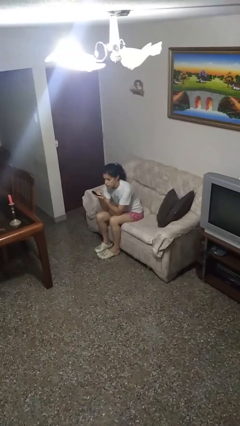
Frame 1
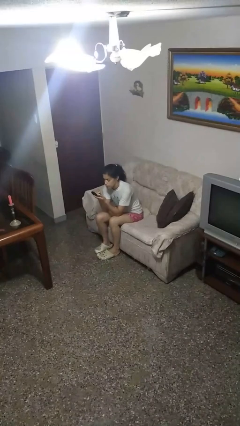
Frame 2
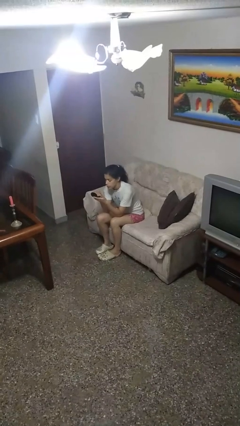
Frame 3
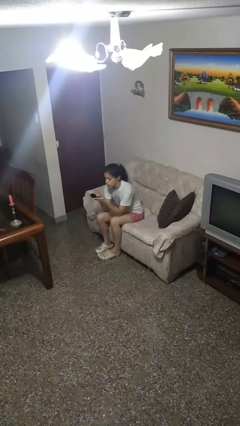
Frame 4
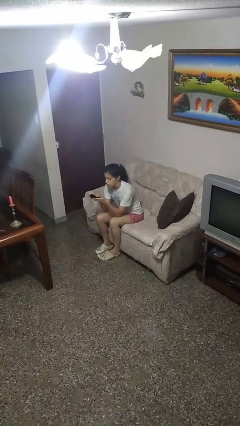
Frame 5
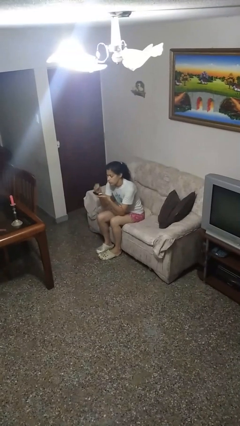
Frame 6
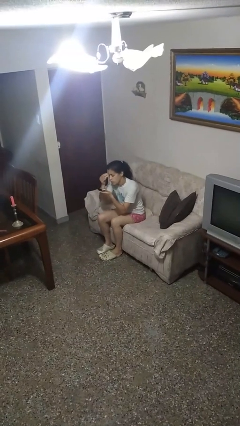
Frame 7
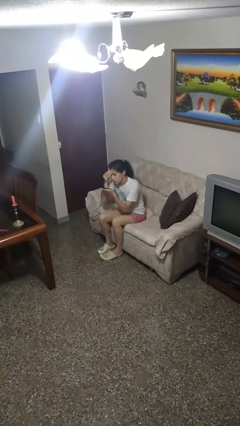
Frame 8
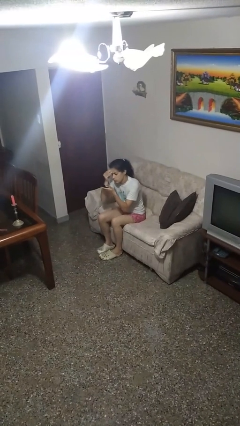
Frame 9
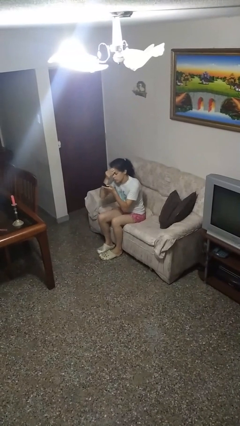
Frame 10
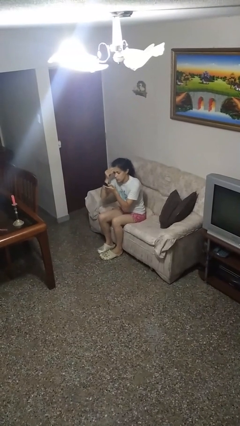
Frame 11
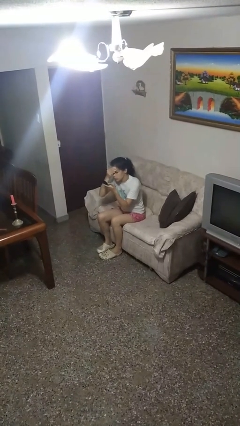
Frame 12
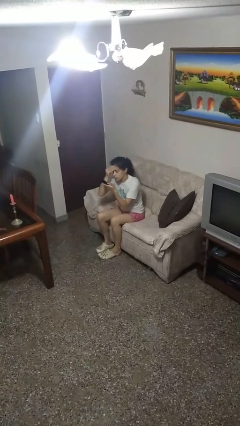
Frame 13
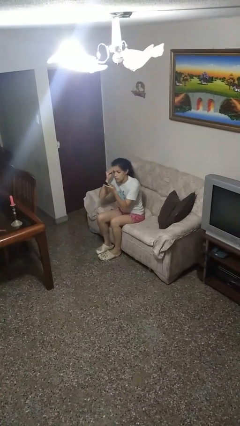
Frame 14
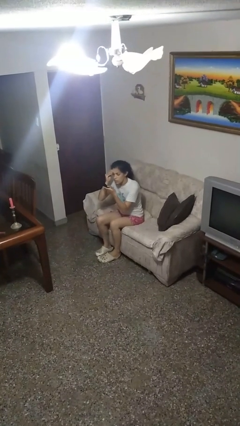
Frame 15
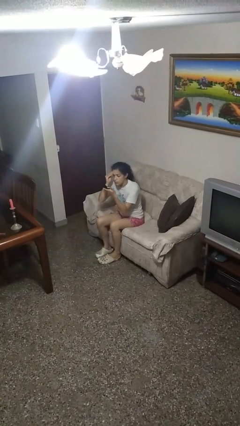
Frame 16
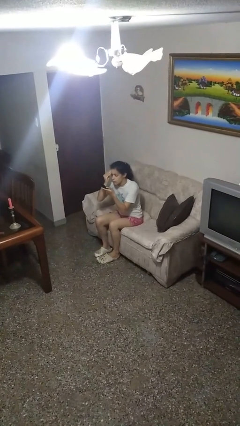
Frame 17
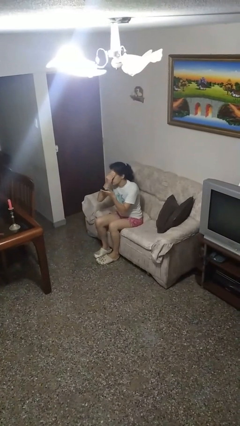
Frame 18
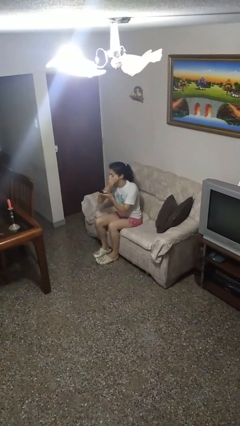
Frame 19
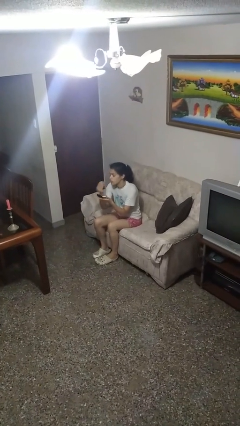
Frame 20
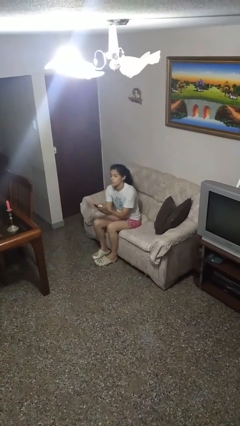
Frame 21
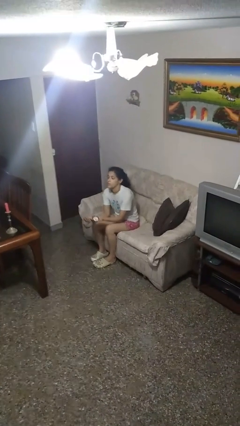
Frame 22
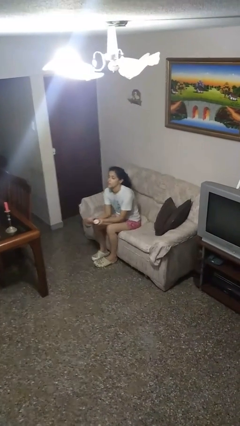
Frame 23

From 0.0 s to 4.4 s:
person applies foundation makeup

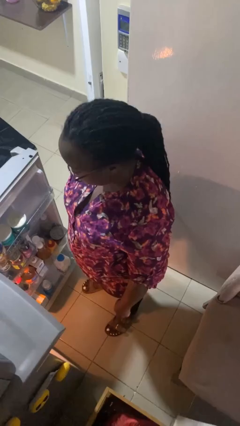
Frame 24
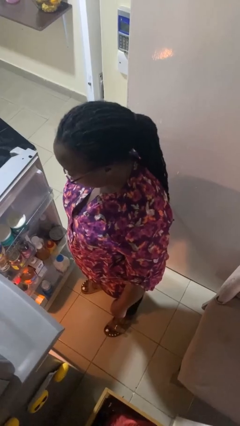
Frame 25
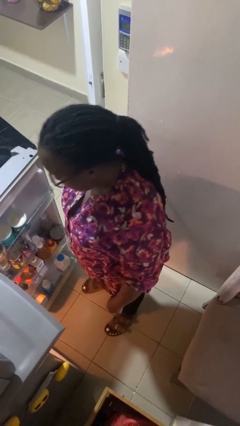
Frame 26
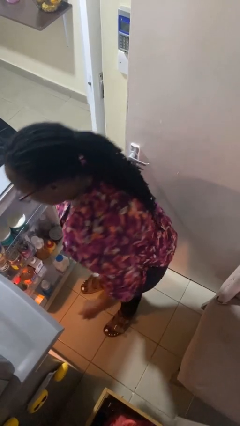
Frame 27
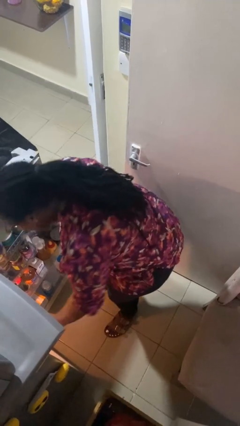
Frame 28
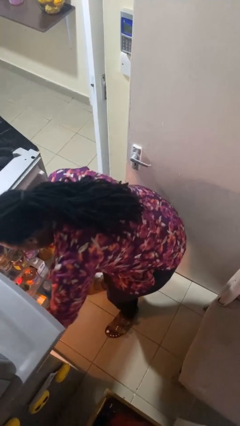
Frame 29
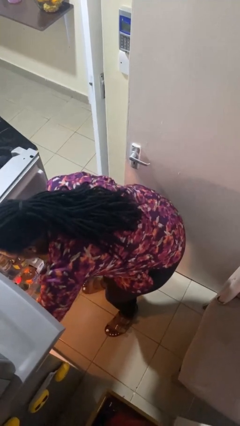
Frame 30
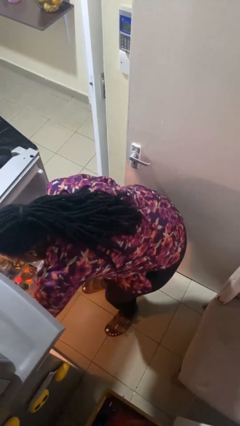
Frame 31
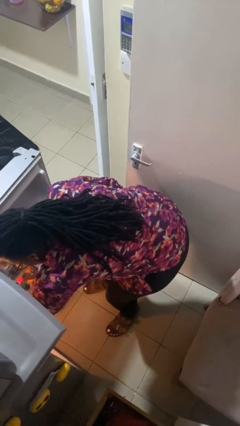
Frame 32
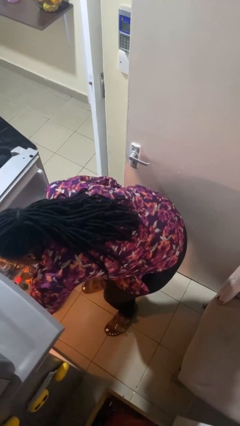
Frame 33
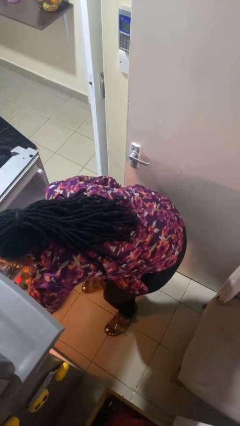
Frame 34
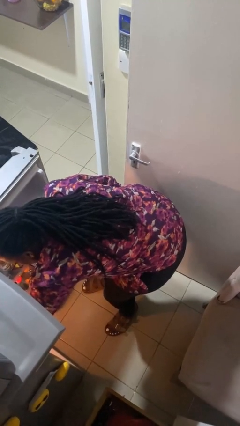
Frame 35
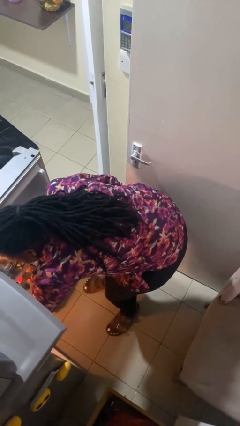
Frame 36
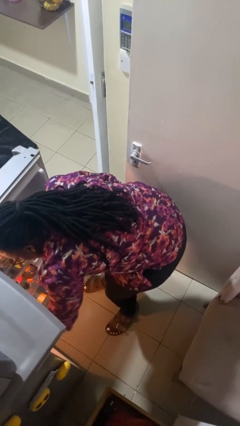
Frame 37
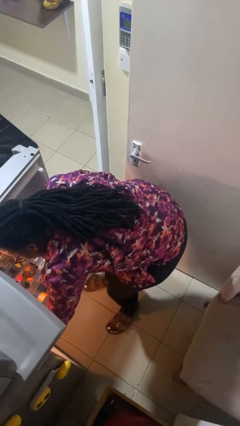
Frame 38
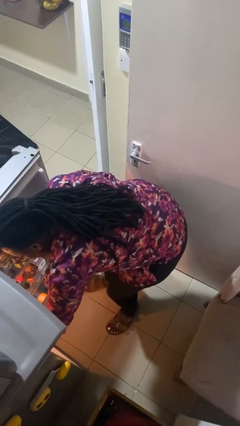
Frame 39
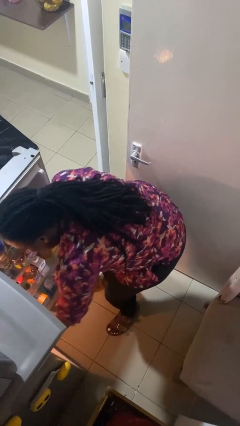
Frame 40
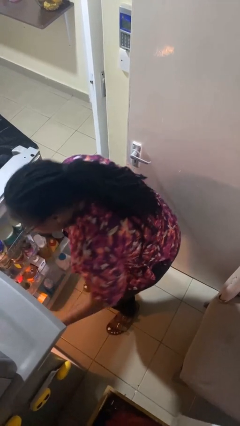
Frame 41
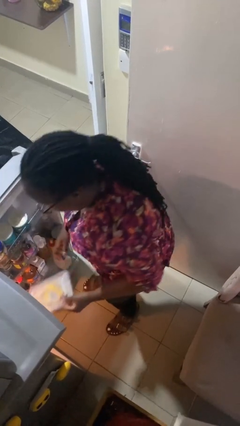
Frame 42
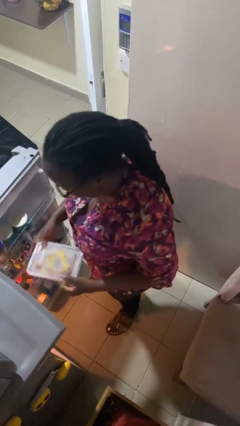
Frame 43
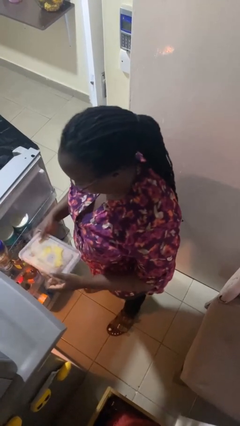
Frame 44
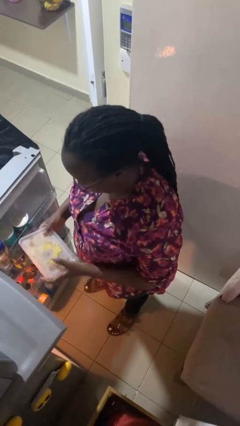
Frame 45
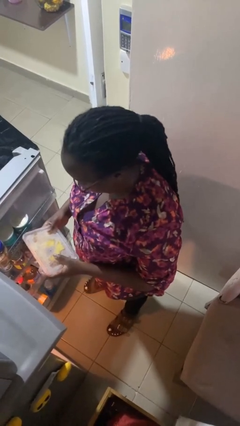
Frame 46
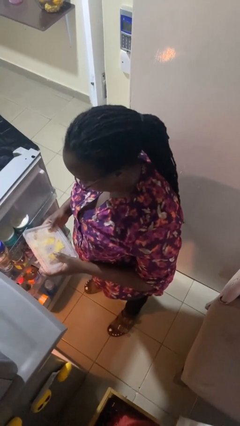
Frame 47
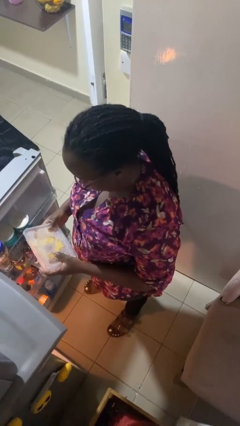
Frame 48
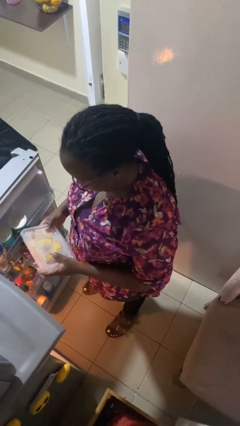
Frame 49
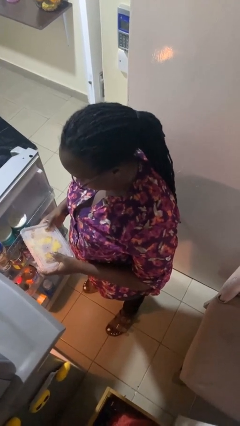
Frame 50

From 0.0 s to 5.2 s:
person takes object from refrigerator

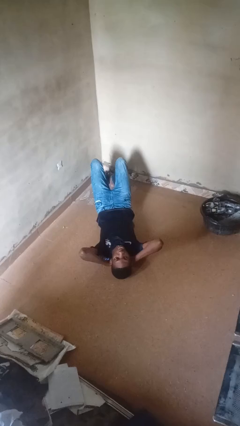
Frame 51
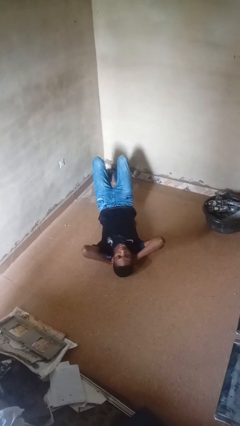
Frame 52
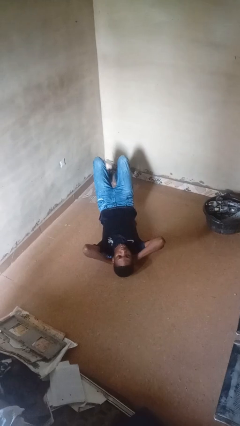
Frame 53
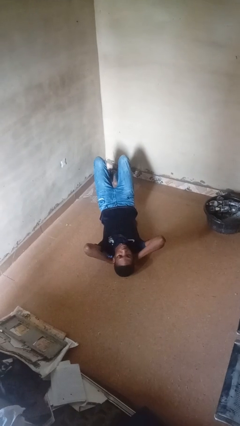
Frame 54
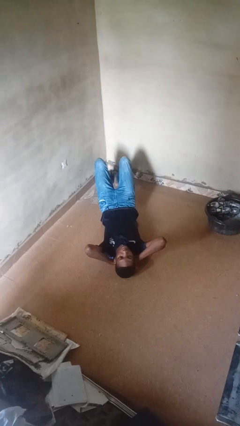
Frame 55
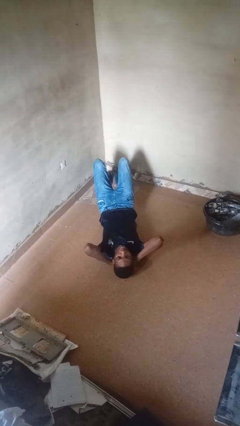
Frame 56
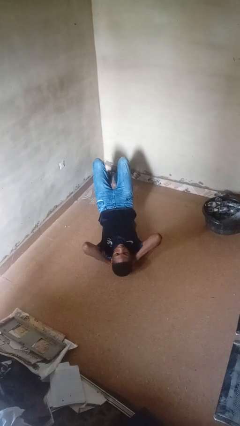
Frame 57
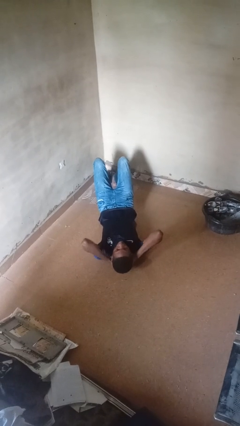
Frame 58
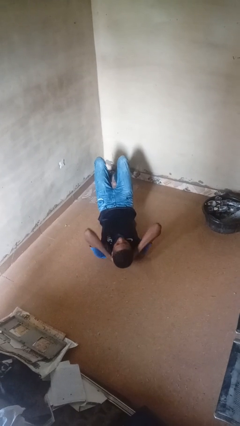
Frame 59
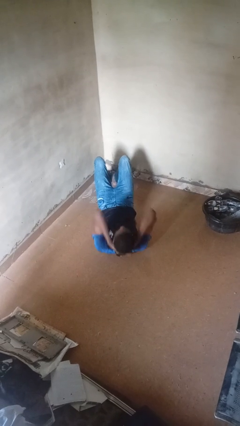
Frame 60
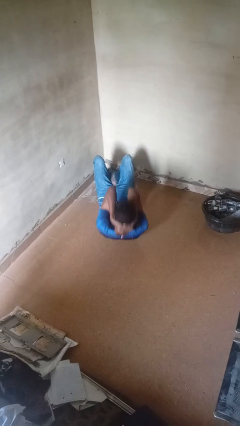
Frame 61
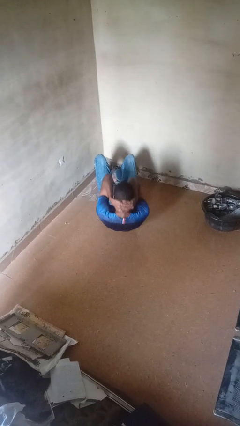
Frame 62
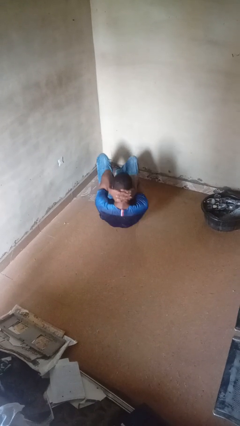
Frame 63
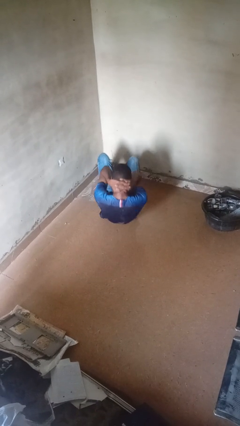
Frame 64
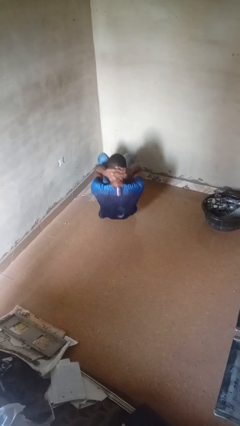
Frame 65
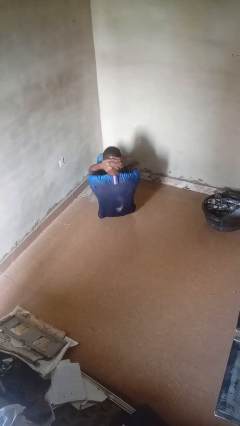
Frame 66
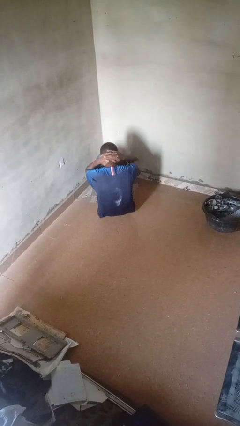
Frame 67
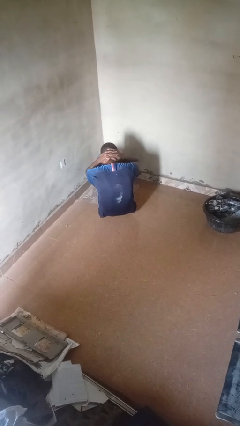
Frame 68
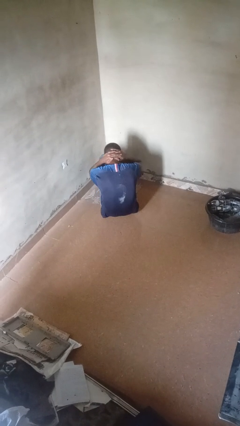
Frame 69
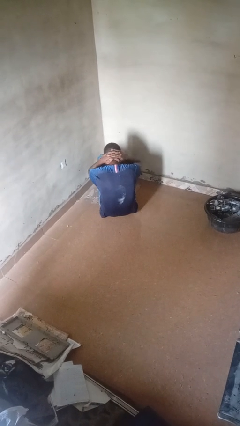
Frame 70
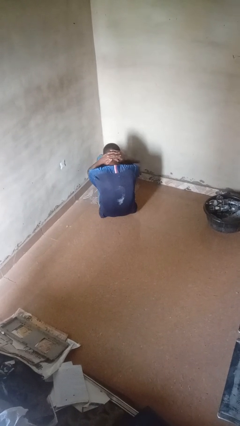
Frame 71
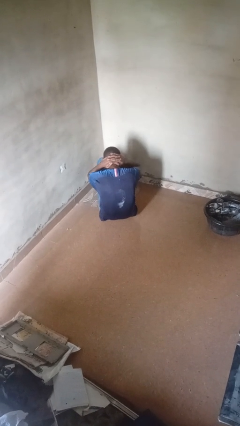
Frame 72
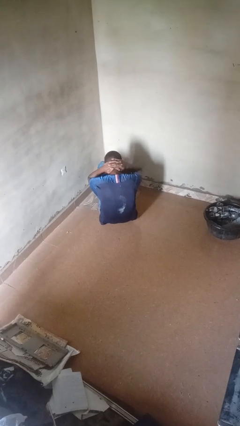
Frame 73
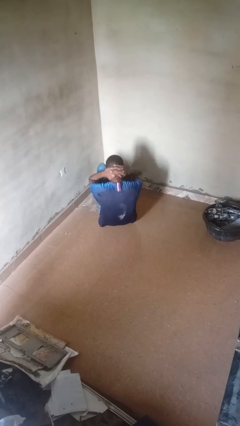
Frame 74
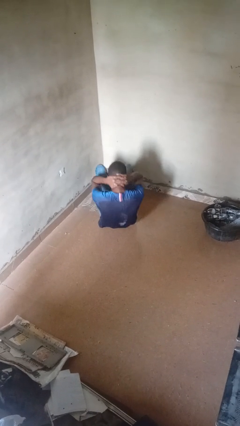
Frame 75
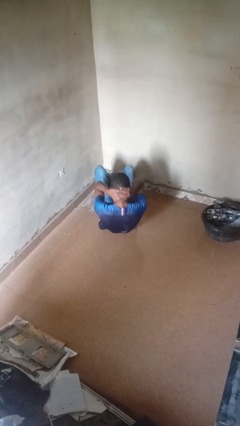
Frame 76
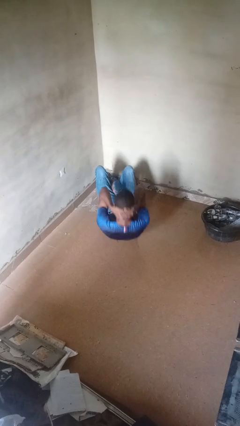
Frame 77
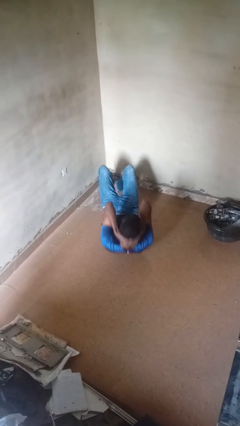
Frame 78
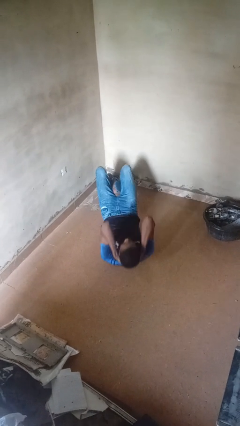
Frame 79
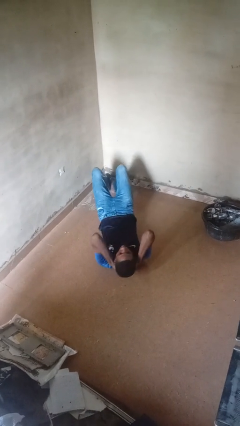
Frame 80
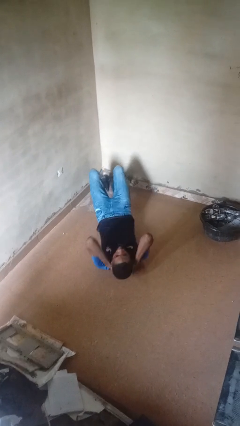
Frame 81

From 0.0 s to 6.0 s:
person exercises with situp

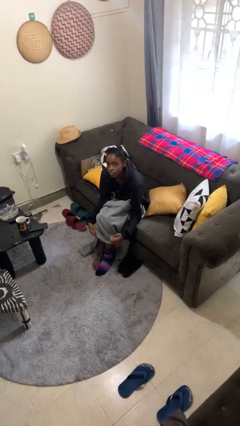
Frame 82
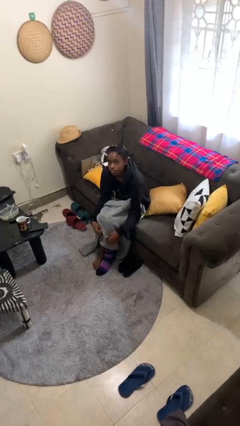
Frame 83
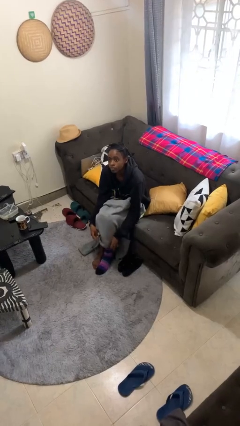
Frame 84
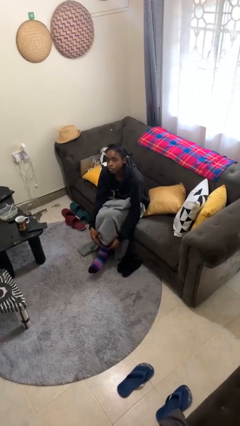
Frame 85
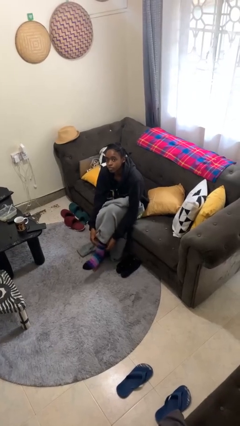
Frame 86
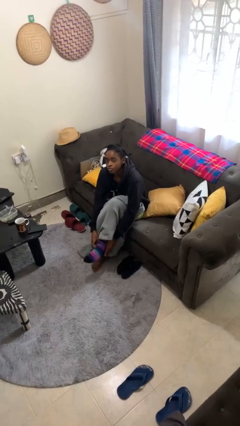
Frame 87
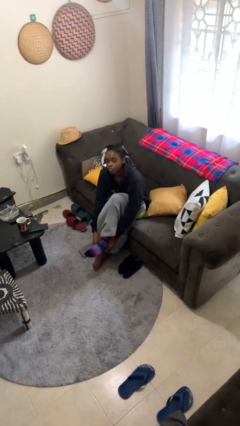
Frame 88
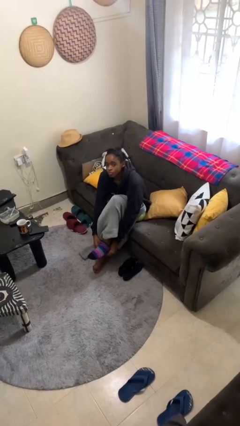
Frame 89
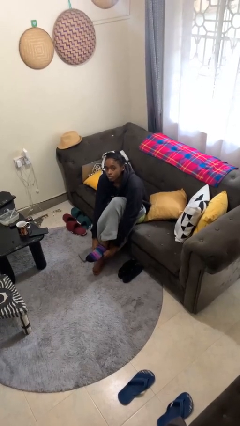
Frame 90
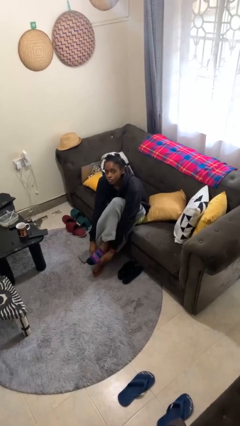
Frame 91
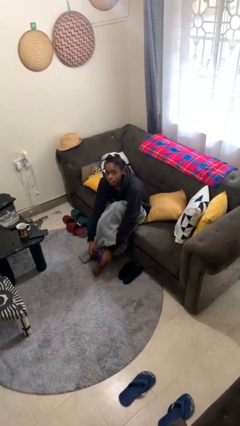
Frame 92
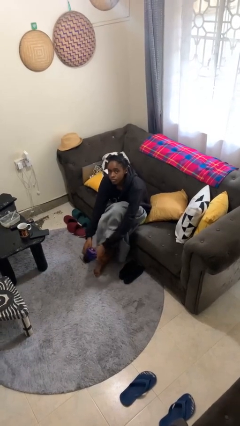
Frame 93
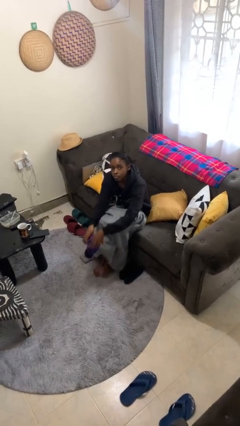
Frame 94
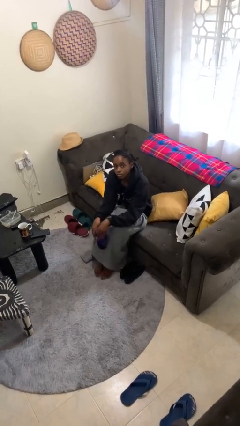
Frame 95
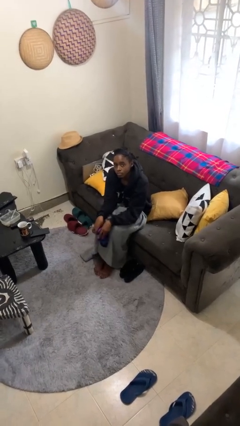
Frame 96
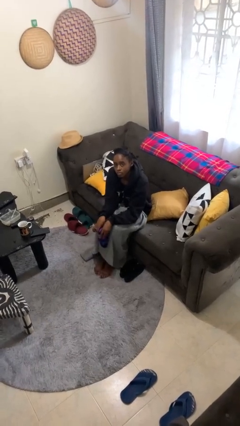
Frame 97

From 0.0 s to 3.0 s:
person takes off socks
